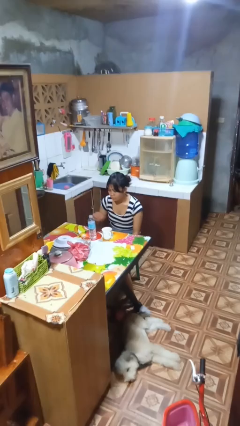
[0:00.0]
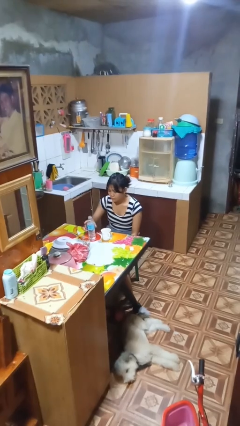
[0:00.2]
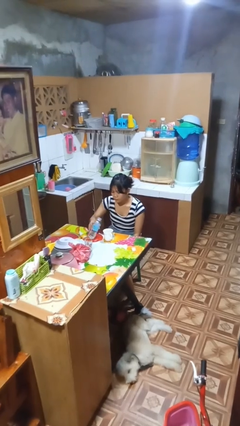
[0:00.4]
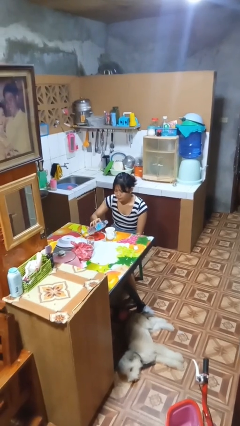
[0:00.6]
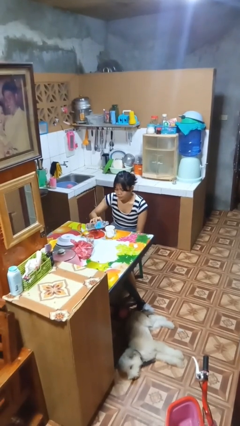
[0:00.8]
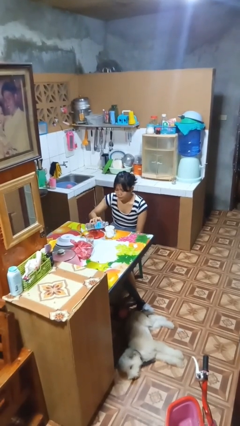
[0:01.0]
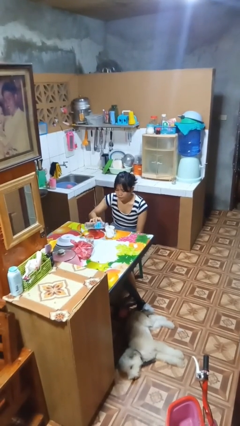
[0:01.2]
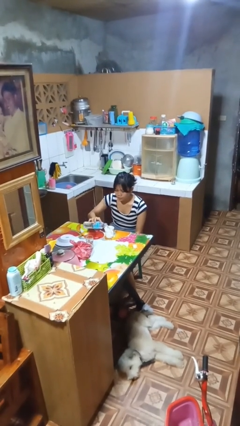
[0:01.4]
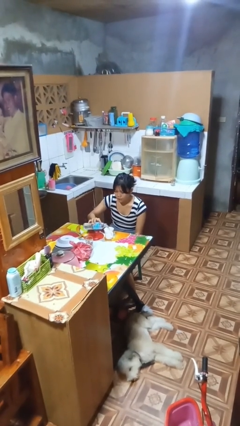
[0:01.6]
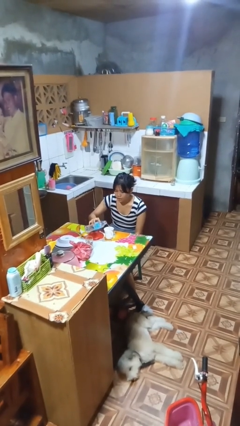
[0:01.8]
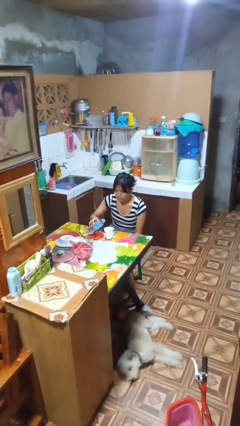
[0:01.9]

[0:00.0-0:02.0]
person pours liquid into cup

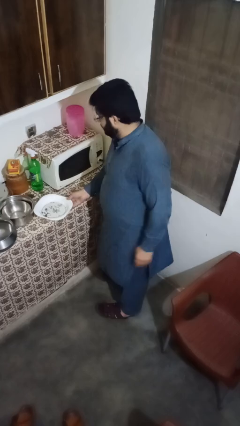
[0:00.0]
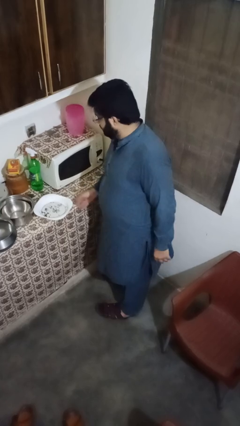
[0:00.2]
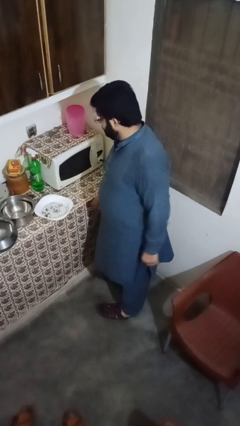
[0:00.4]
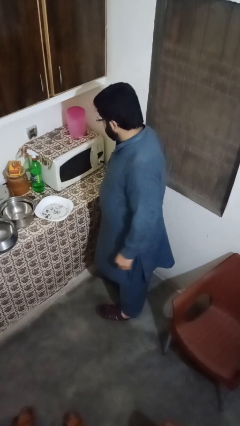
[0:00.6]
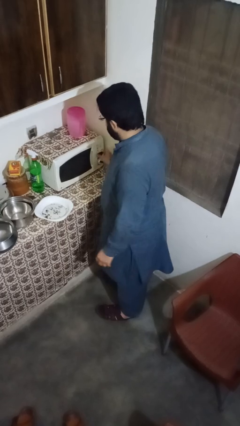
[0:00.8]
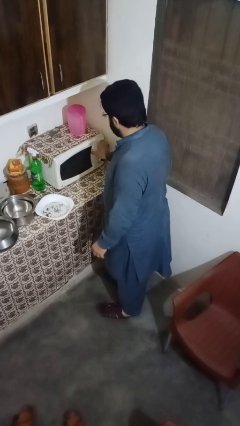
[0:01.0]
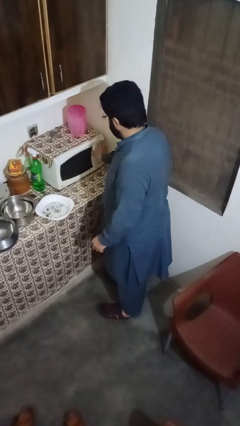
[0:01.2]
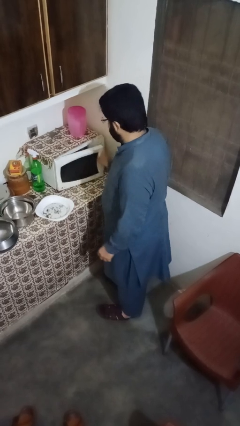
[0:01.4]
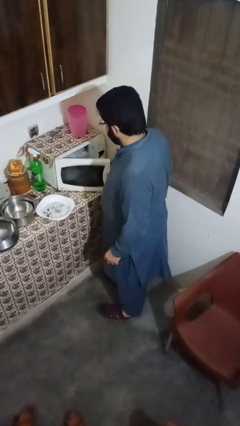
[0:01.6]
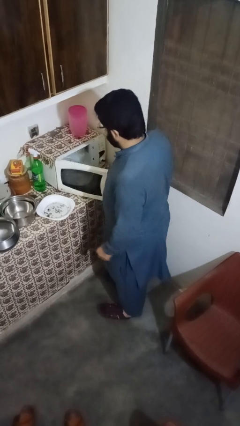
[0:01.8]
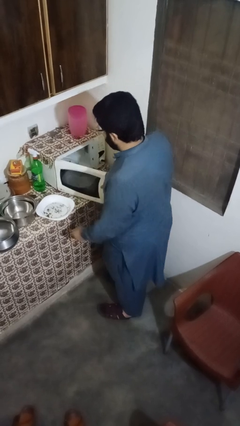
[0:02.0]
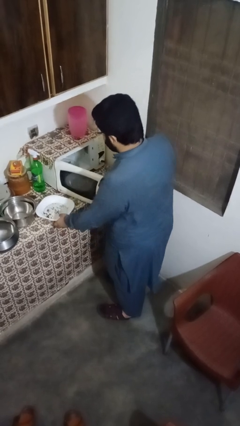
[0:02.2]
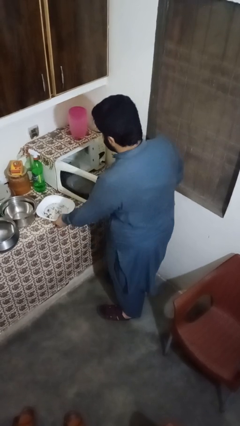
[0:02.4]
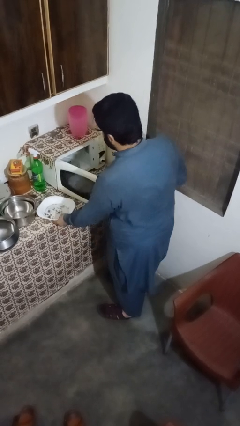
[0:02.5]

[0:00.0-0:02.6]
person opens microwave

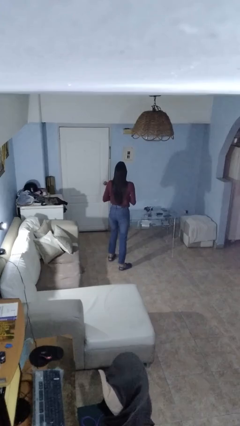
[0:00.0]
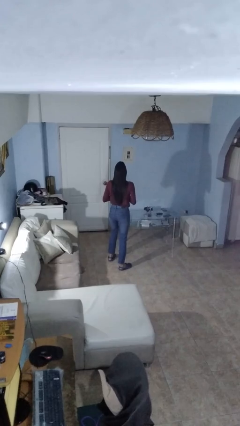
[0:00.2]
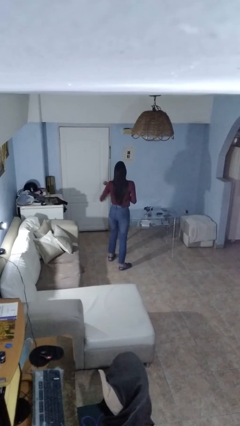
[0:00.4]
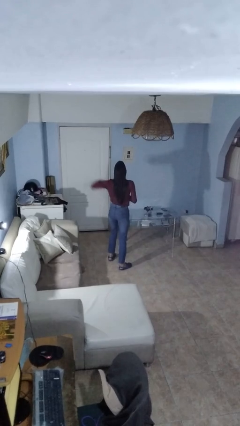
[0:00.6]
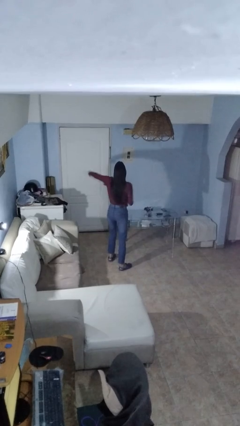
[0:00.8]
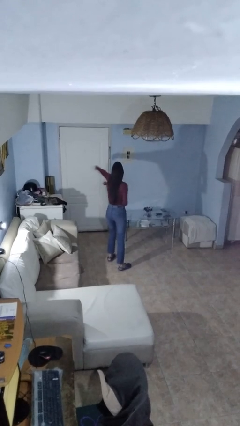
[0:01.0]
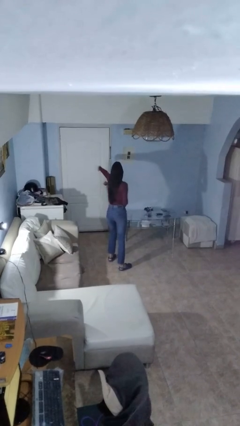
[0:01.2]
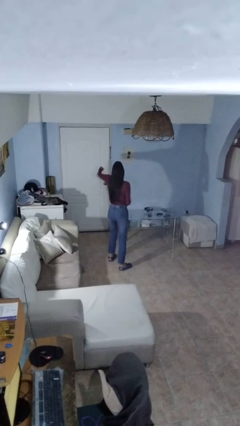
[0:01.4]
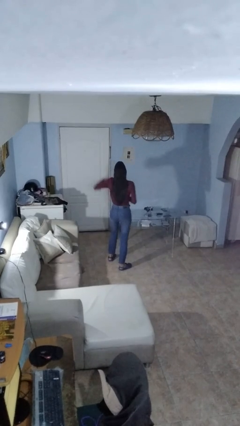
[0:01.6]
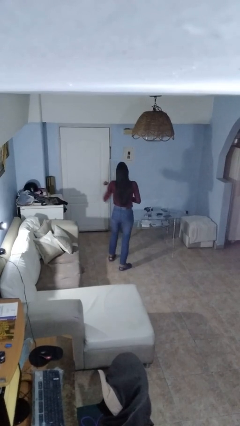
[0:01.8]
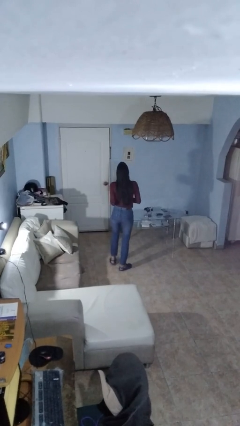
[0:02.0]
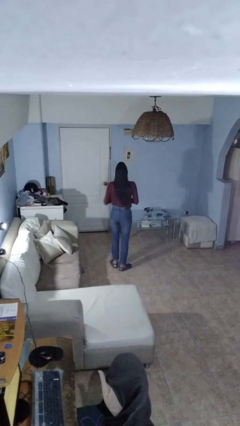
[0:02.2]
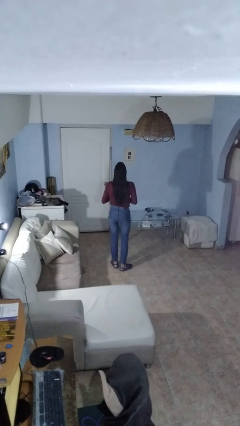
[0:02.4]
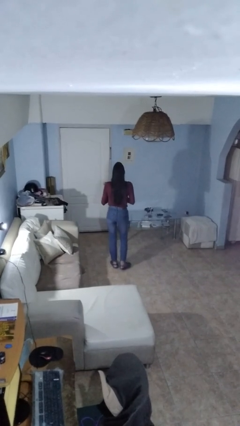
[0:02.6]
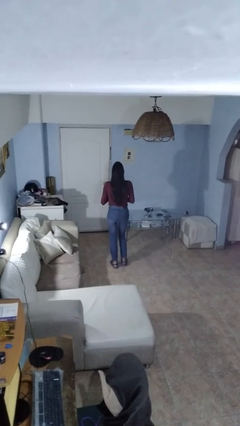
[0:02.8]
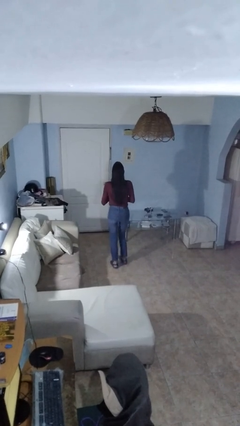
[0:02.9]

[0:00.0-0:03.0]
person karate chop

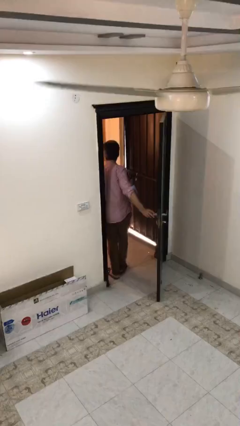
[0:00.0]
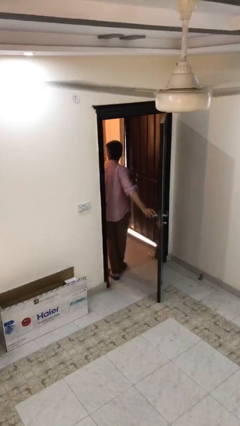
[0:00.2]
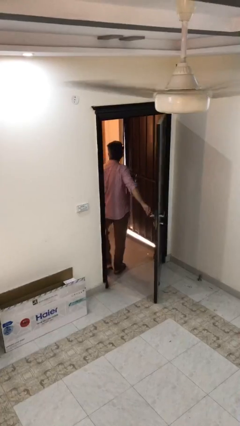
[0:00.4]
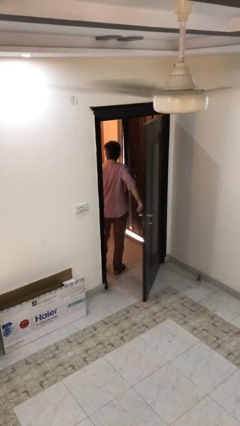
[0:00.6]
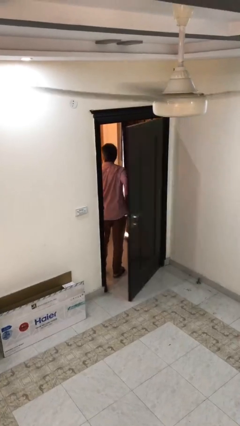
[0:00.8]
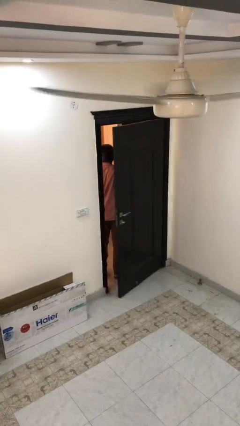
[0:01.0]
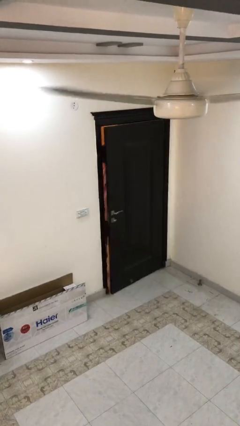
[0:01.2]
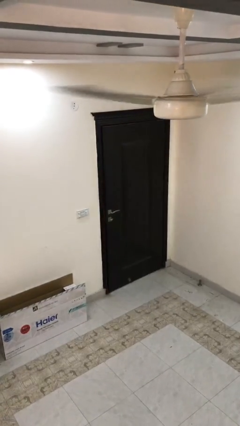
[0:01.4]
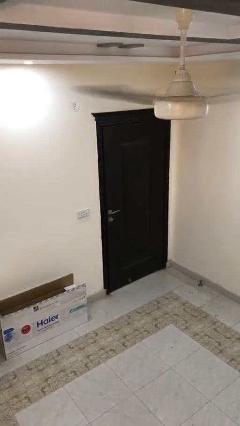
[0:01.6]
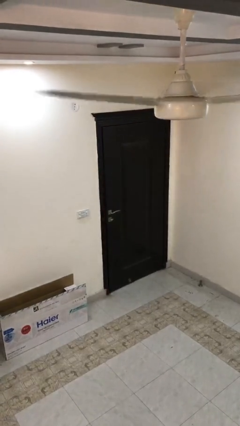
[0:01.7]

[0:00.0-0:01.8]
person closes facility door

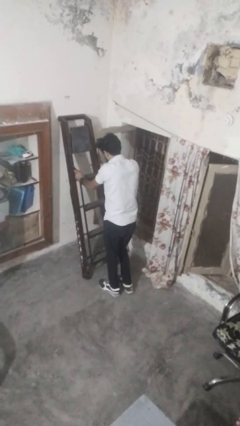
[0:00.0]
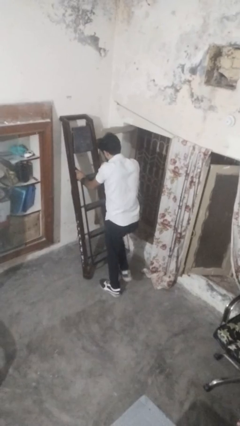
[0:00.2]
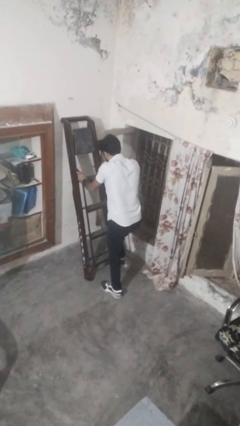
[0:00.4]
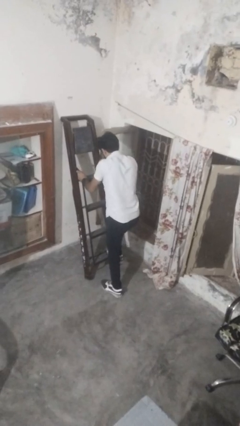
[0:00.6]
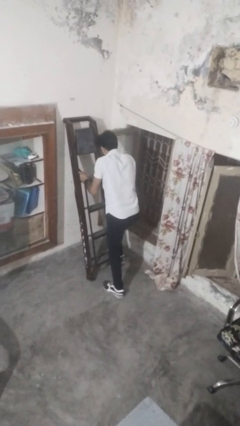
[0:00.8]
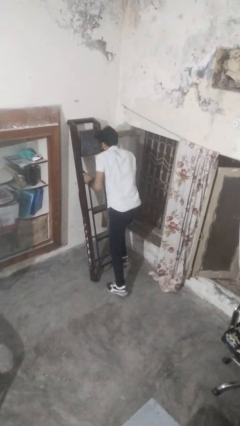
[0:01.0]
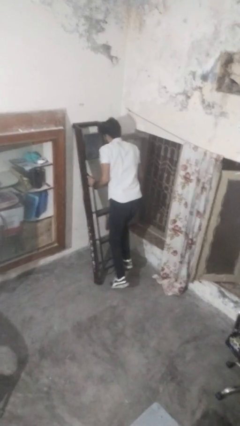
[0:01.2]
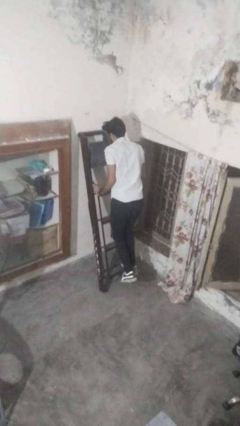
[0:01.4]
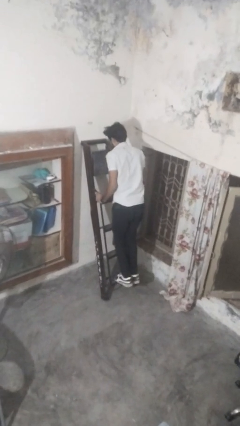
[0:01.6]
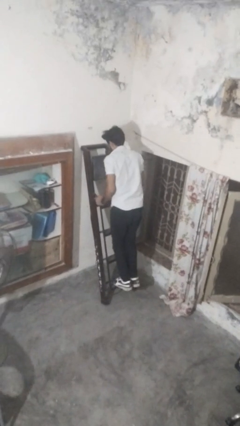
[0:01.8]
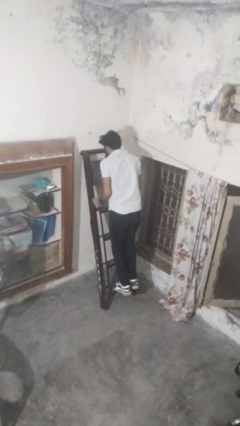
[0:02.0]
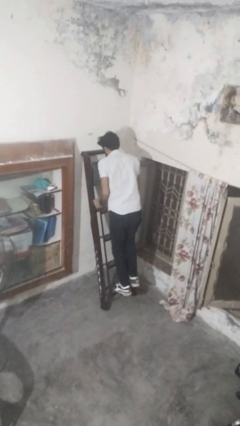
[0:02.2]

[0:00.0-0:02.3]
person climbs up ladder

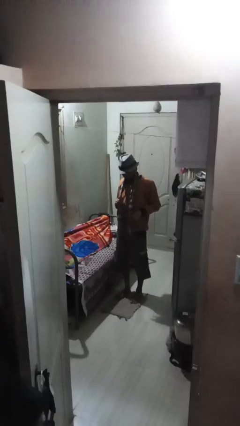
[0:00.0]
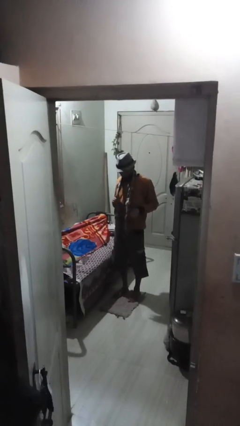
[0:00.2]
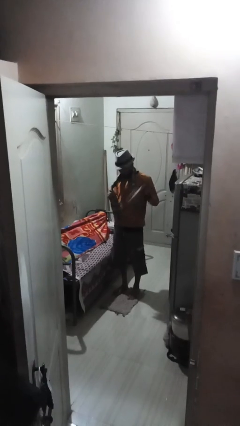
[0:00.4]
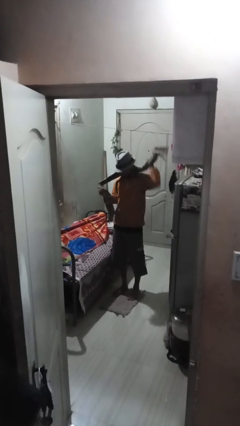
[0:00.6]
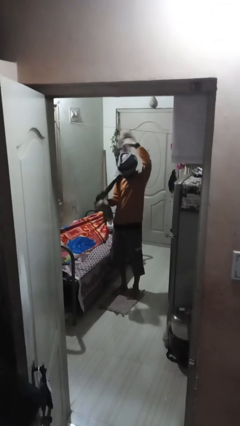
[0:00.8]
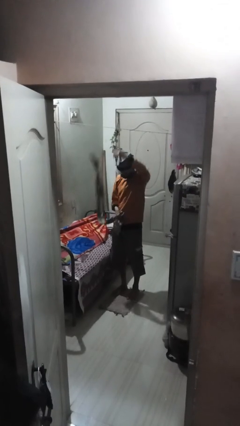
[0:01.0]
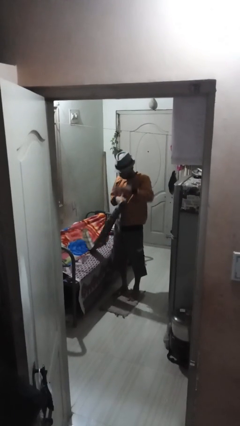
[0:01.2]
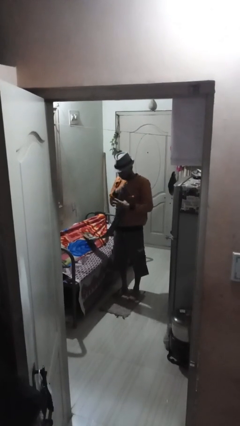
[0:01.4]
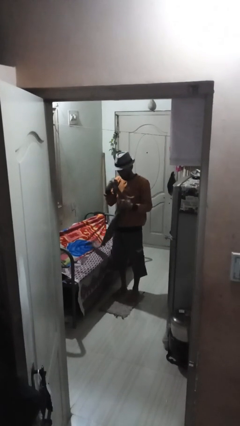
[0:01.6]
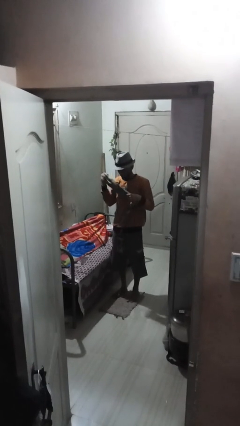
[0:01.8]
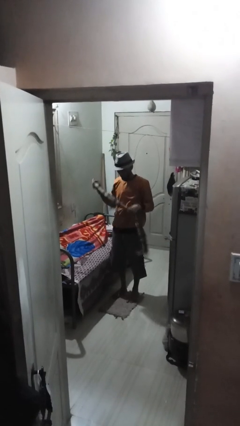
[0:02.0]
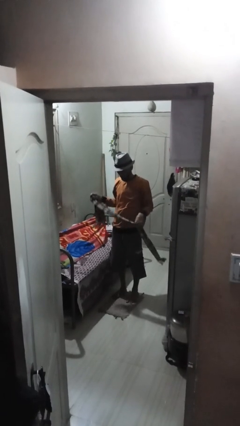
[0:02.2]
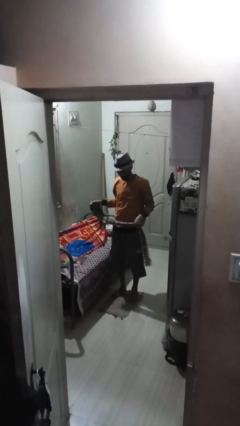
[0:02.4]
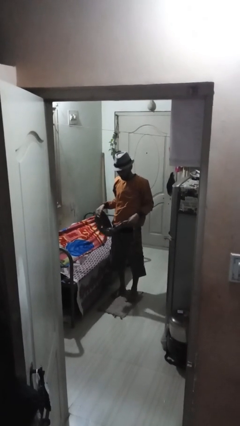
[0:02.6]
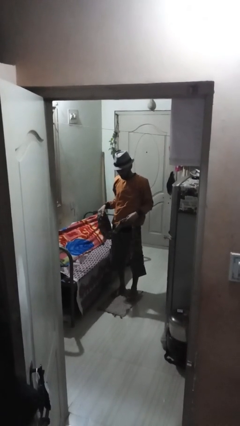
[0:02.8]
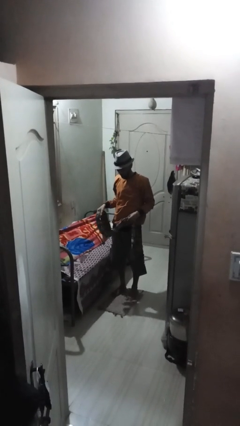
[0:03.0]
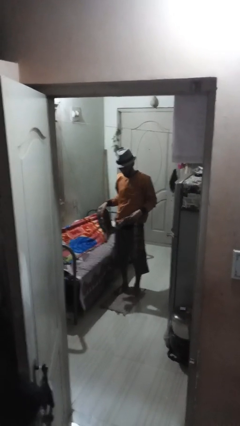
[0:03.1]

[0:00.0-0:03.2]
person takes off scarf

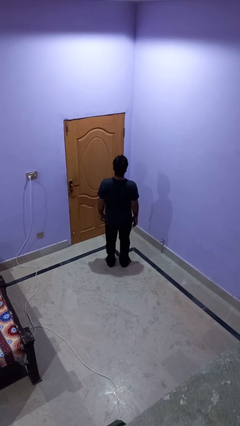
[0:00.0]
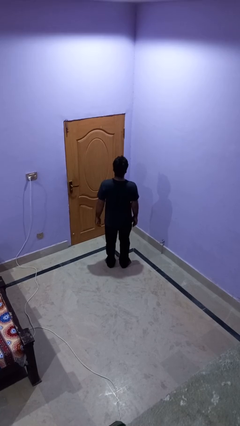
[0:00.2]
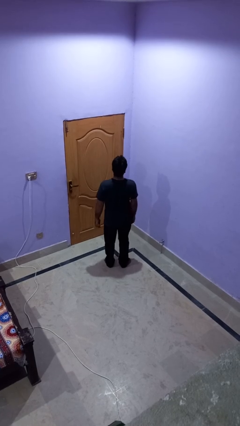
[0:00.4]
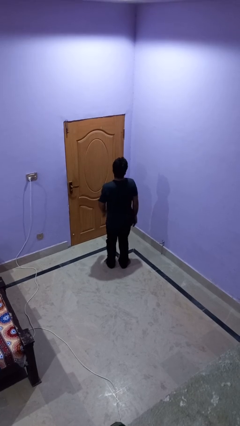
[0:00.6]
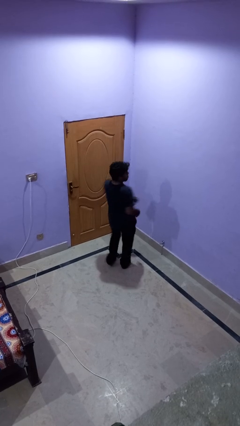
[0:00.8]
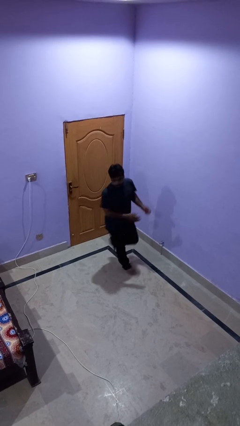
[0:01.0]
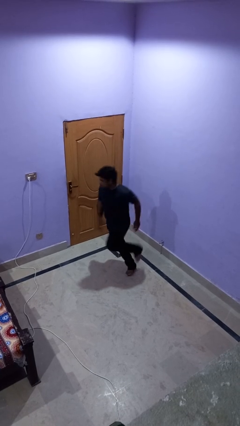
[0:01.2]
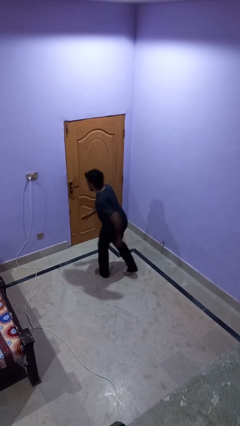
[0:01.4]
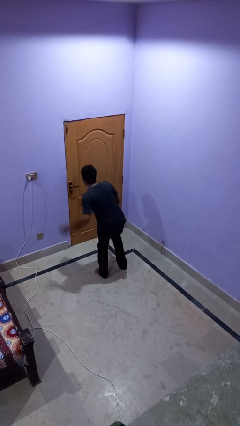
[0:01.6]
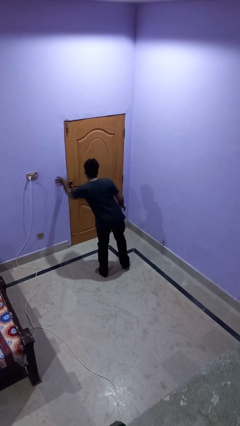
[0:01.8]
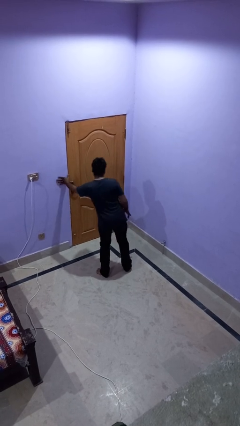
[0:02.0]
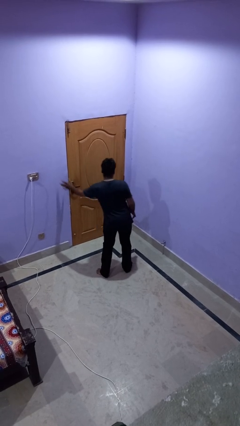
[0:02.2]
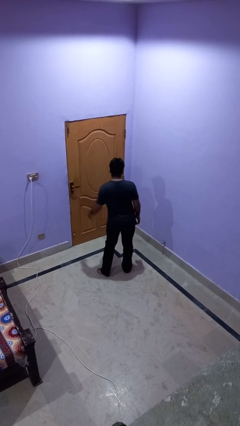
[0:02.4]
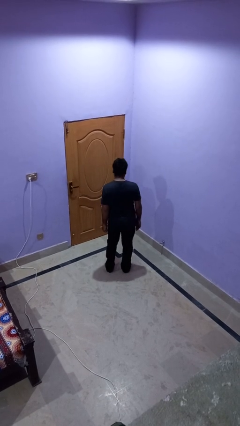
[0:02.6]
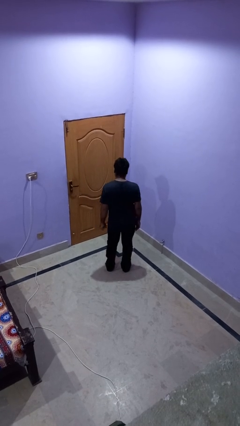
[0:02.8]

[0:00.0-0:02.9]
person twirls
